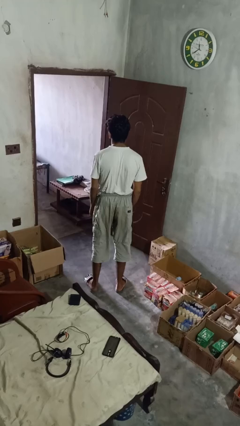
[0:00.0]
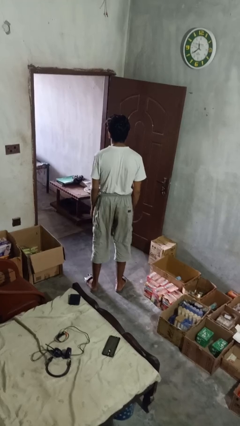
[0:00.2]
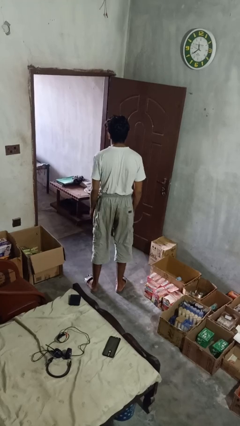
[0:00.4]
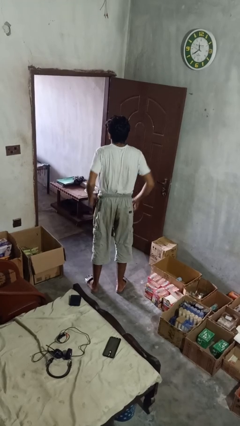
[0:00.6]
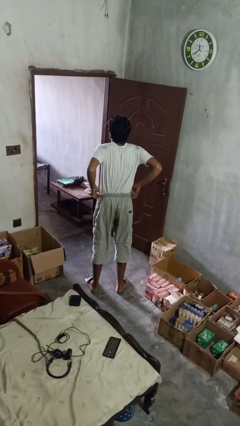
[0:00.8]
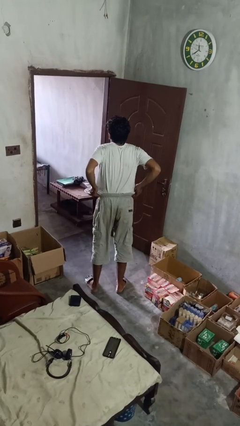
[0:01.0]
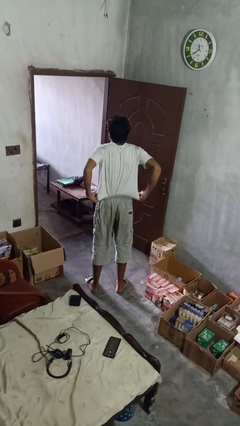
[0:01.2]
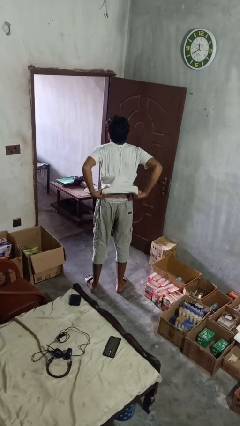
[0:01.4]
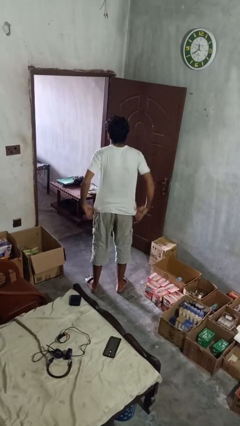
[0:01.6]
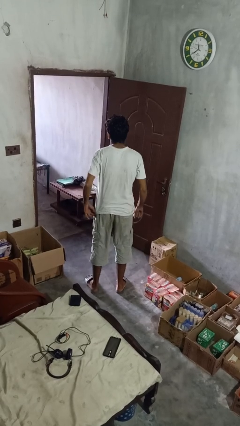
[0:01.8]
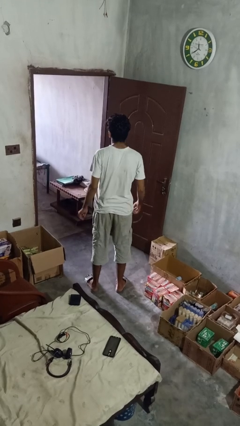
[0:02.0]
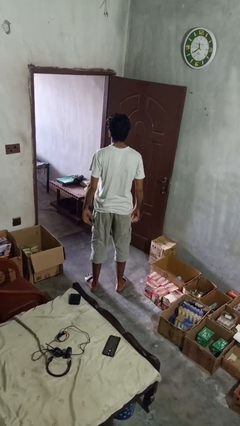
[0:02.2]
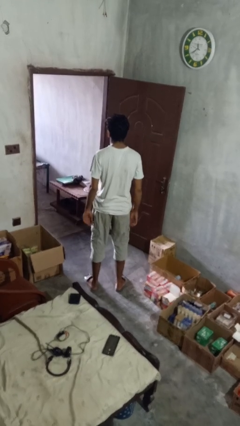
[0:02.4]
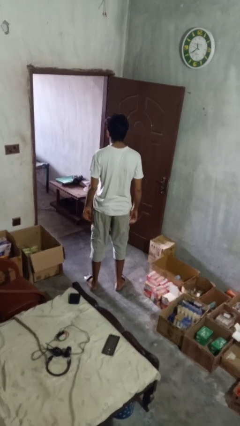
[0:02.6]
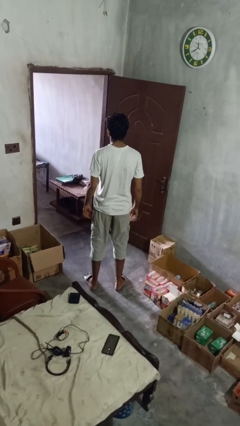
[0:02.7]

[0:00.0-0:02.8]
person untucks shirt

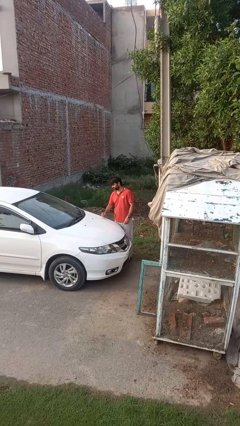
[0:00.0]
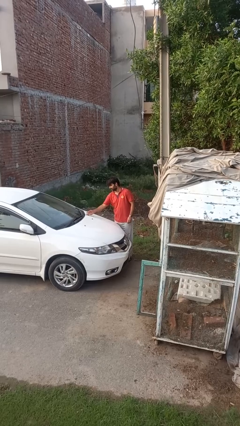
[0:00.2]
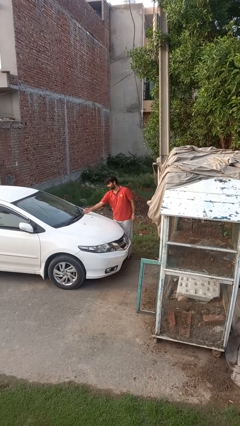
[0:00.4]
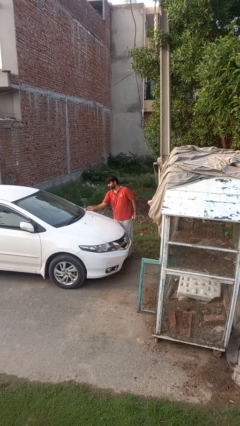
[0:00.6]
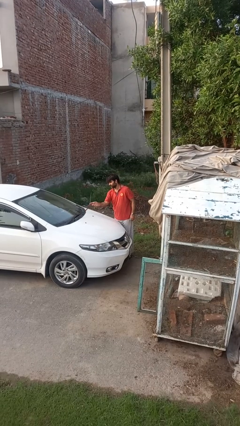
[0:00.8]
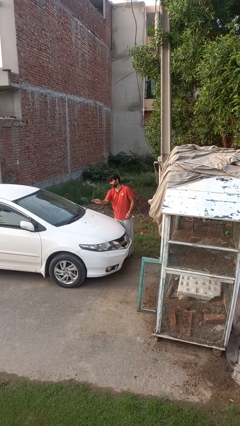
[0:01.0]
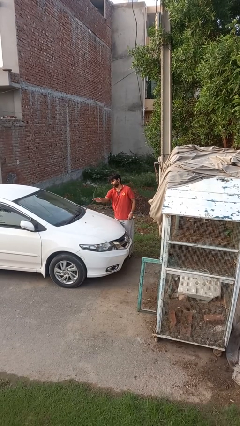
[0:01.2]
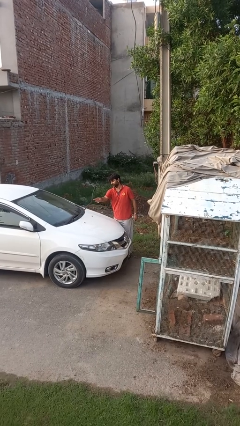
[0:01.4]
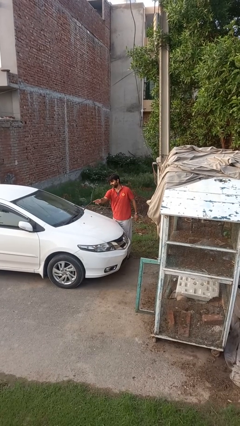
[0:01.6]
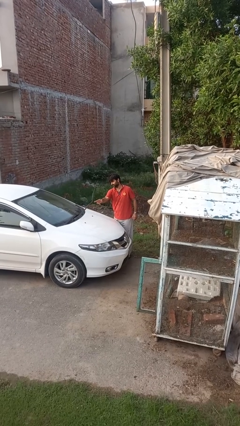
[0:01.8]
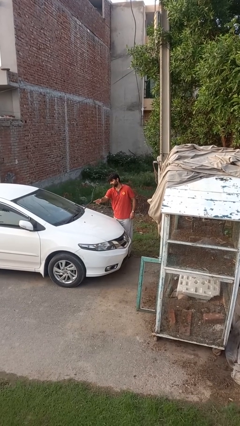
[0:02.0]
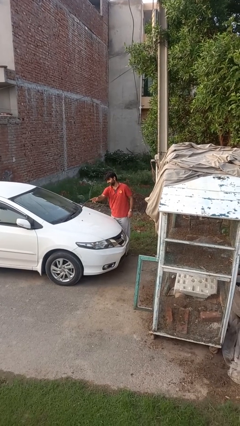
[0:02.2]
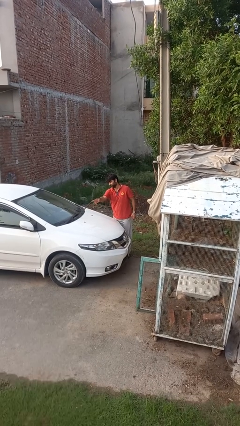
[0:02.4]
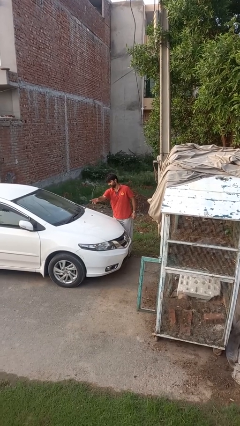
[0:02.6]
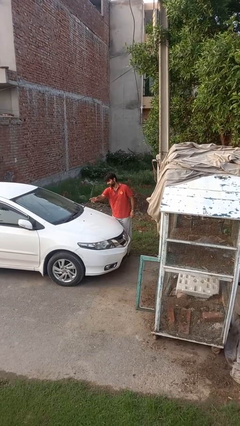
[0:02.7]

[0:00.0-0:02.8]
person flips up car wipers

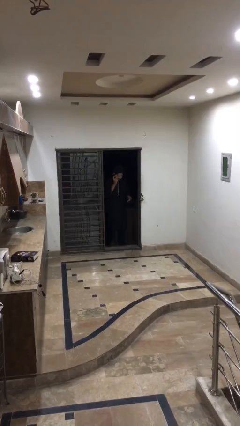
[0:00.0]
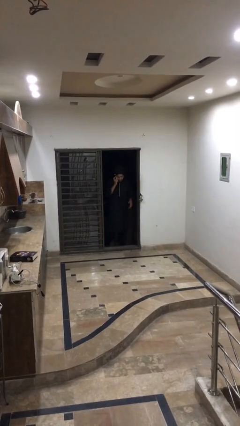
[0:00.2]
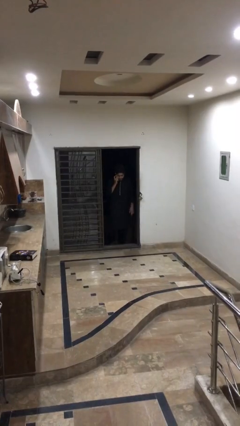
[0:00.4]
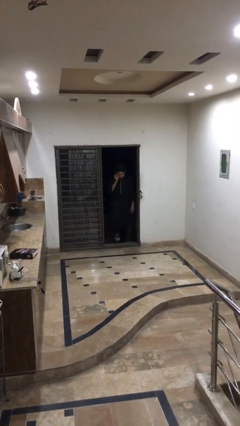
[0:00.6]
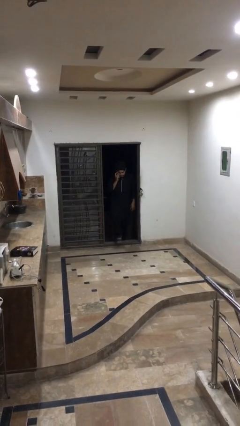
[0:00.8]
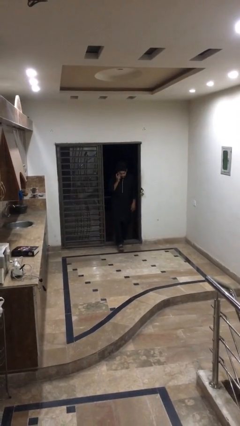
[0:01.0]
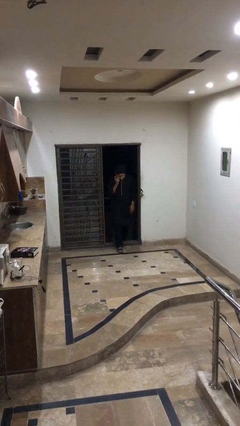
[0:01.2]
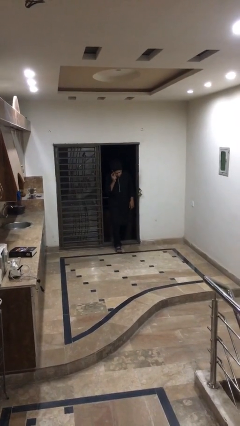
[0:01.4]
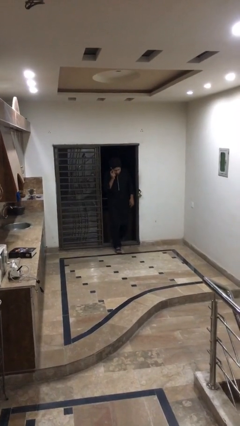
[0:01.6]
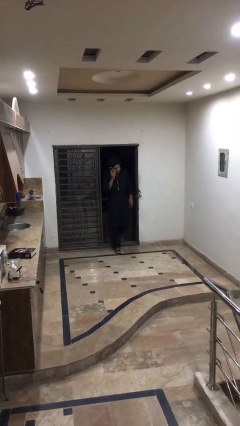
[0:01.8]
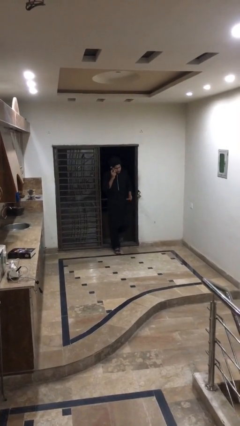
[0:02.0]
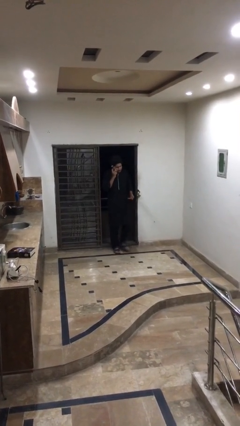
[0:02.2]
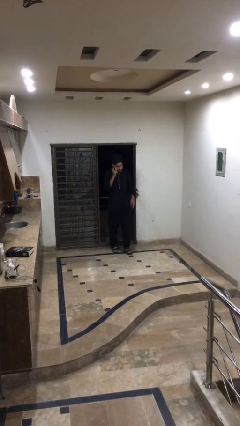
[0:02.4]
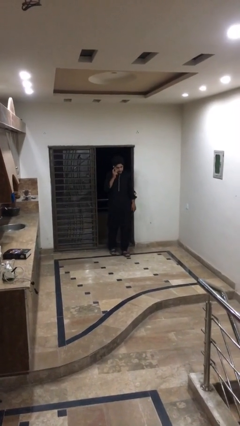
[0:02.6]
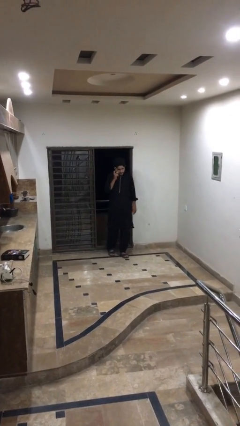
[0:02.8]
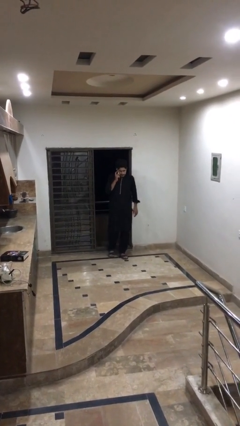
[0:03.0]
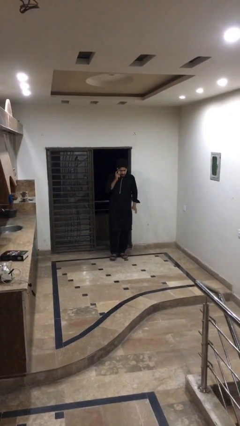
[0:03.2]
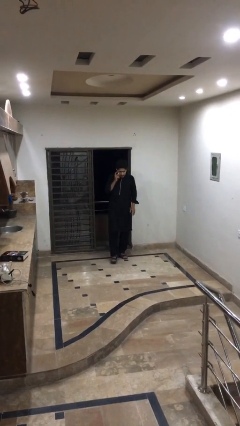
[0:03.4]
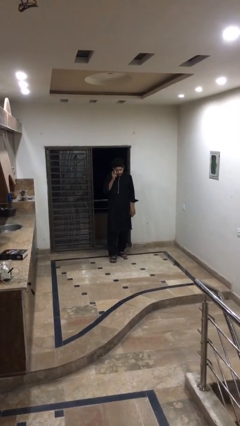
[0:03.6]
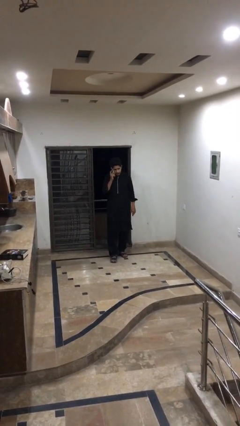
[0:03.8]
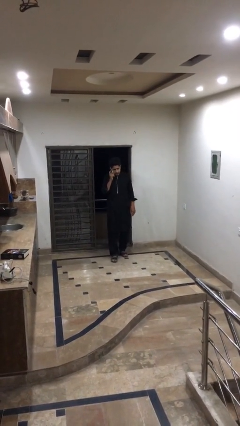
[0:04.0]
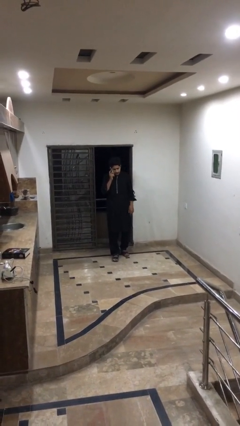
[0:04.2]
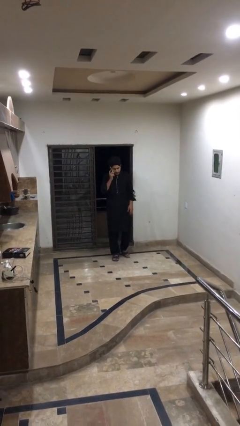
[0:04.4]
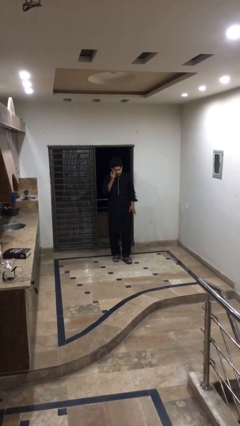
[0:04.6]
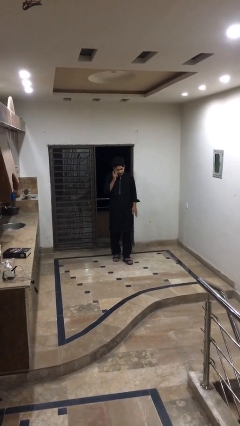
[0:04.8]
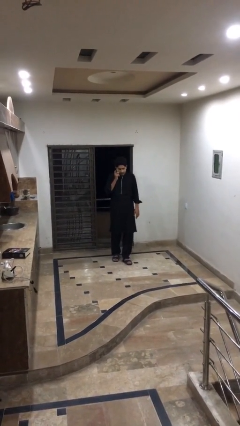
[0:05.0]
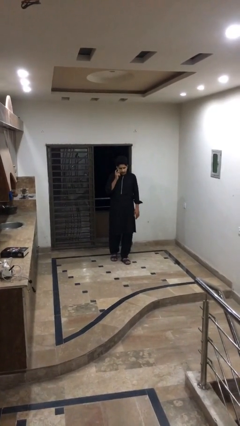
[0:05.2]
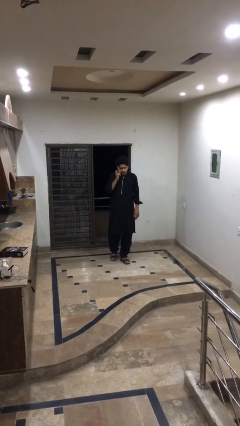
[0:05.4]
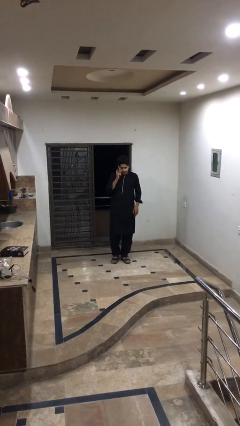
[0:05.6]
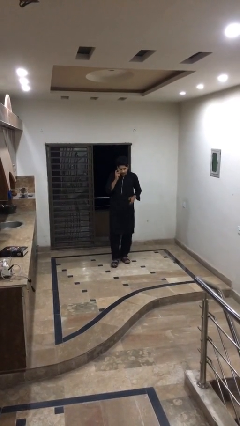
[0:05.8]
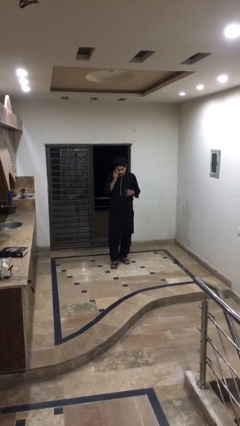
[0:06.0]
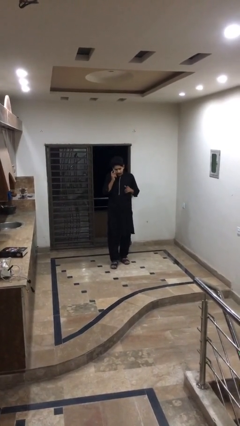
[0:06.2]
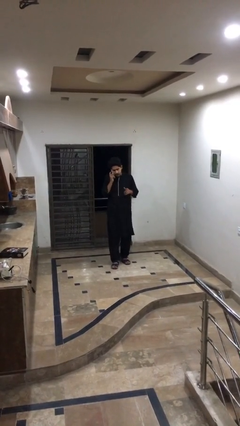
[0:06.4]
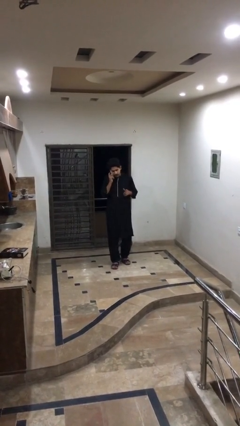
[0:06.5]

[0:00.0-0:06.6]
person enters scene through structure

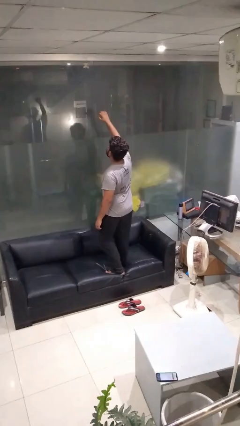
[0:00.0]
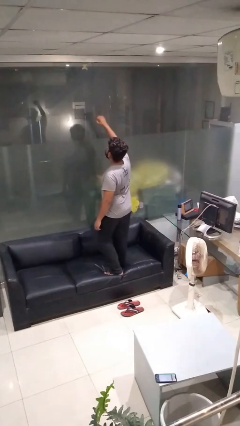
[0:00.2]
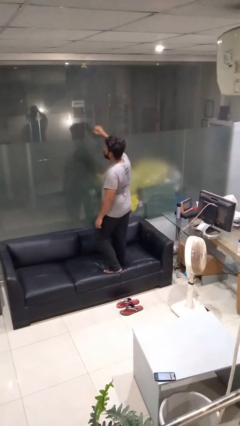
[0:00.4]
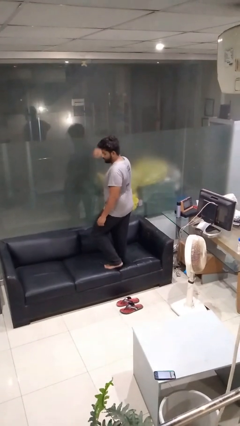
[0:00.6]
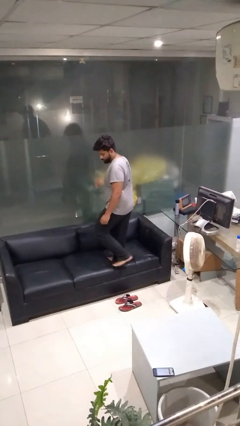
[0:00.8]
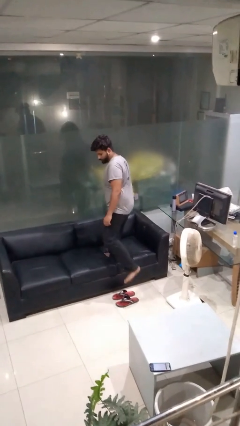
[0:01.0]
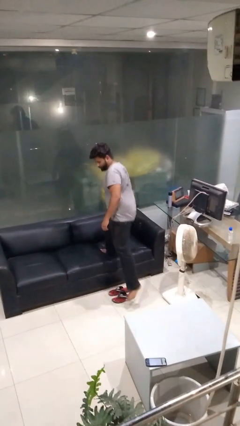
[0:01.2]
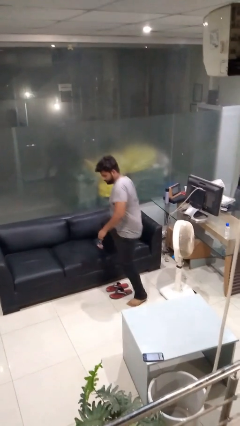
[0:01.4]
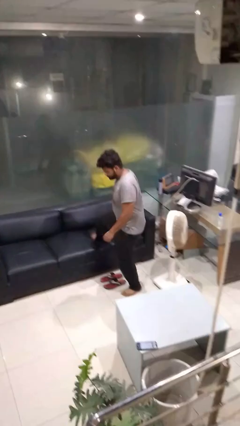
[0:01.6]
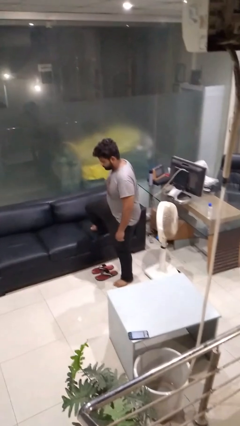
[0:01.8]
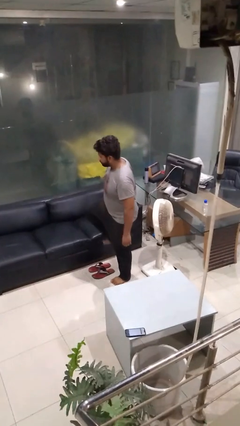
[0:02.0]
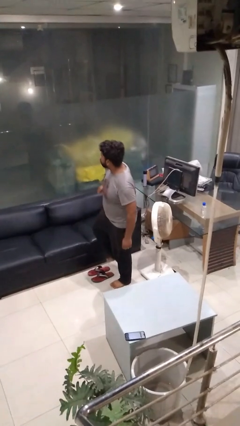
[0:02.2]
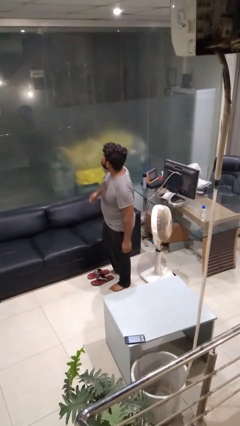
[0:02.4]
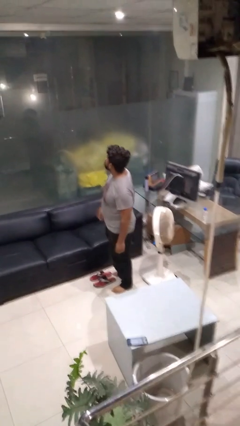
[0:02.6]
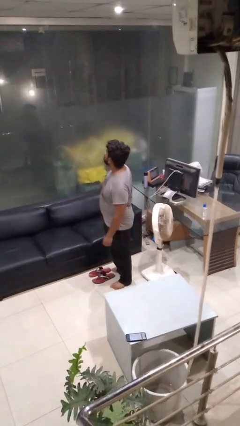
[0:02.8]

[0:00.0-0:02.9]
person climbs off couch

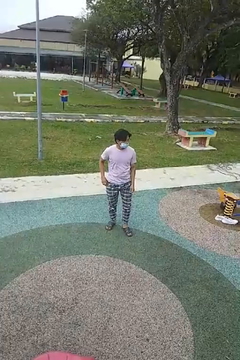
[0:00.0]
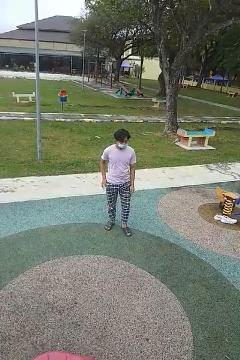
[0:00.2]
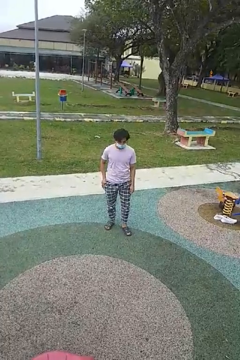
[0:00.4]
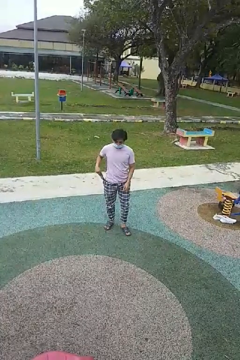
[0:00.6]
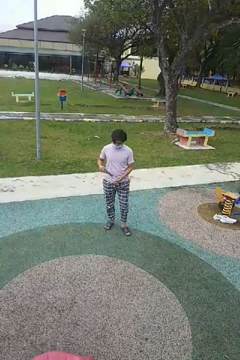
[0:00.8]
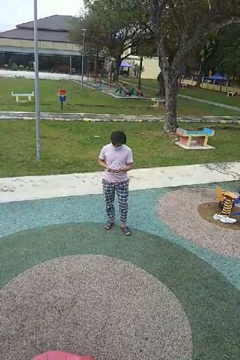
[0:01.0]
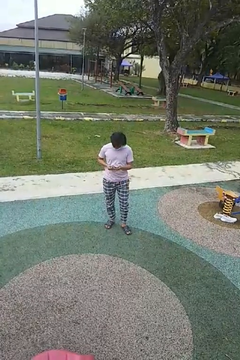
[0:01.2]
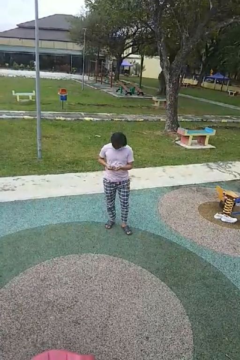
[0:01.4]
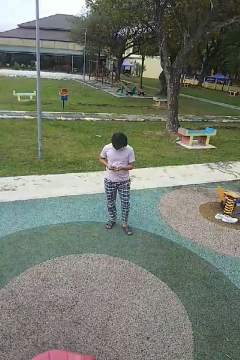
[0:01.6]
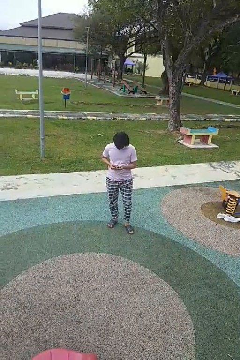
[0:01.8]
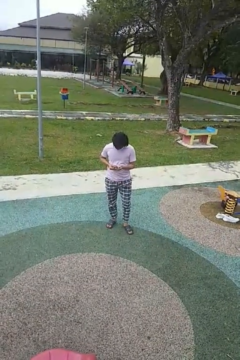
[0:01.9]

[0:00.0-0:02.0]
person takes phone from pocket

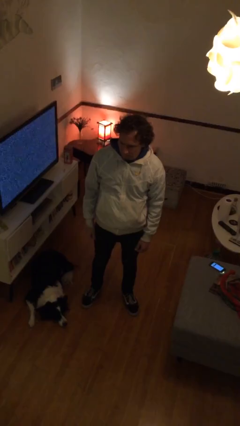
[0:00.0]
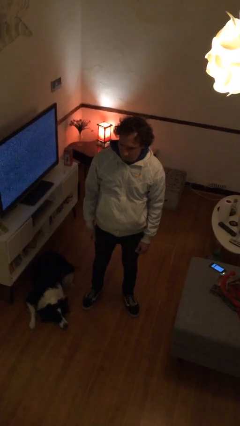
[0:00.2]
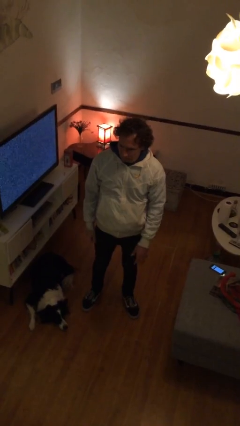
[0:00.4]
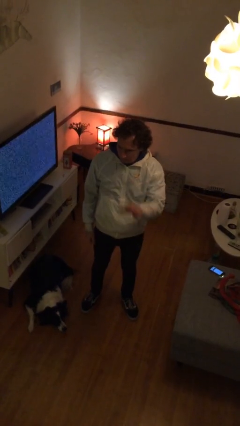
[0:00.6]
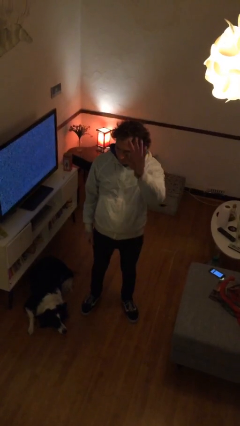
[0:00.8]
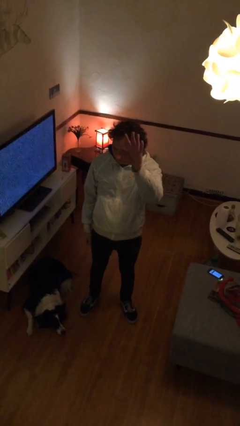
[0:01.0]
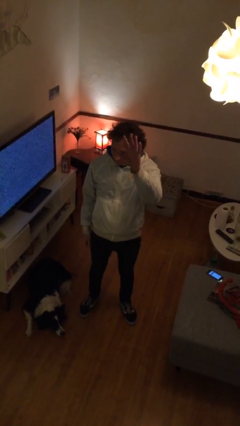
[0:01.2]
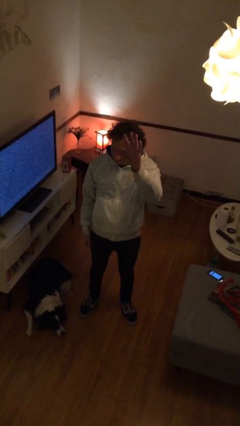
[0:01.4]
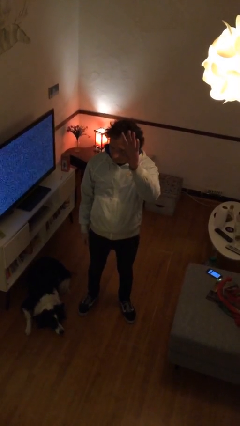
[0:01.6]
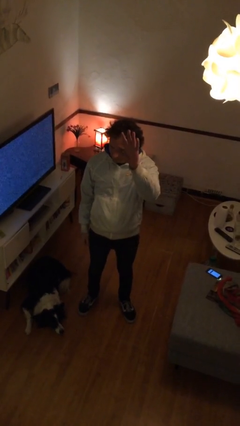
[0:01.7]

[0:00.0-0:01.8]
person gestures raise hand
